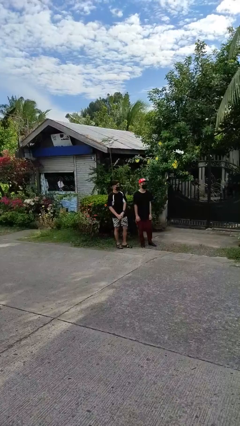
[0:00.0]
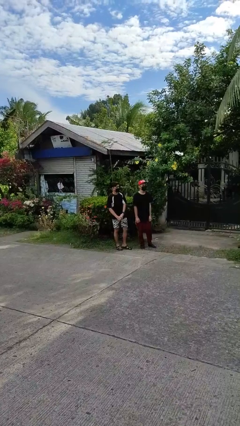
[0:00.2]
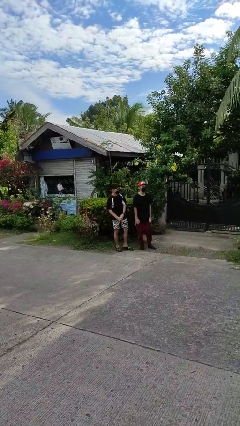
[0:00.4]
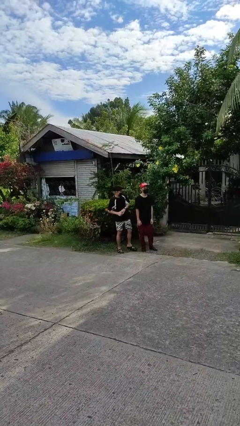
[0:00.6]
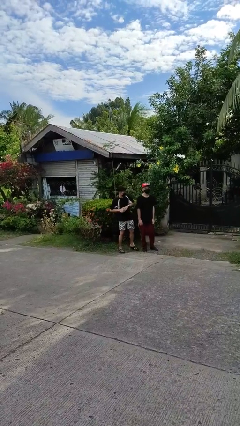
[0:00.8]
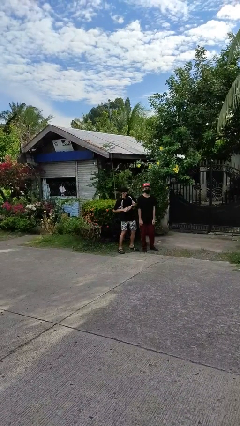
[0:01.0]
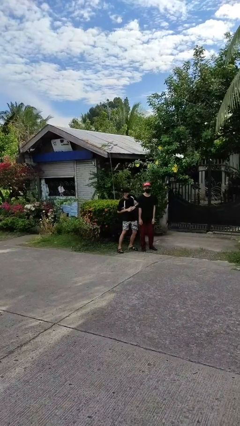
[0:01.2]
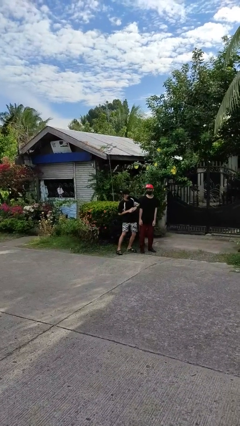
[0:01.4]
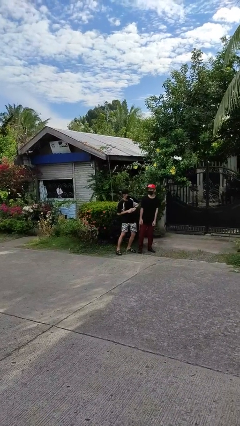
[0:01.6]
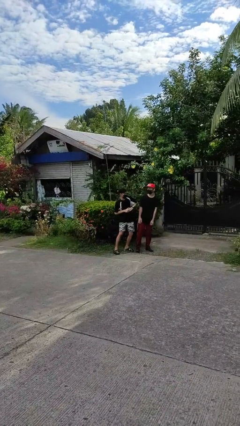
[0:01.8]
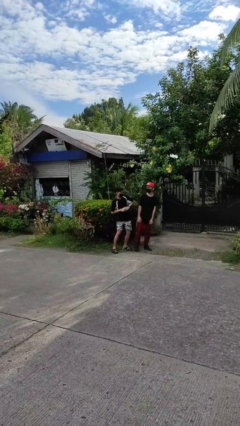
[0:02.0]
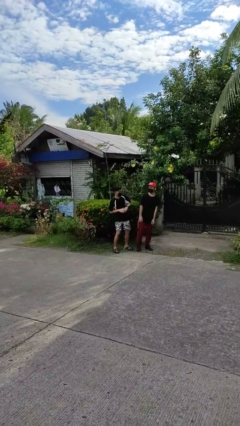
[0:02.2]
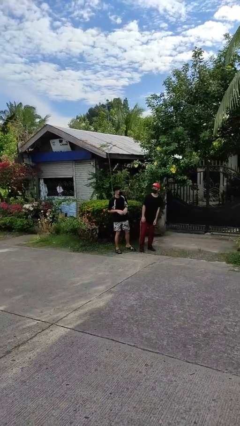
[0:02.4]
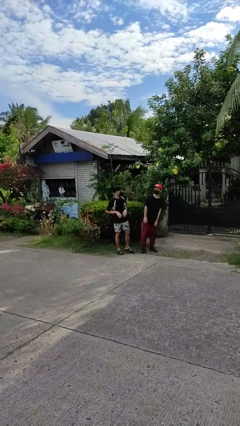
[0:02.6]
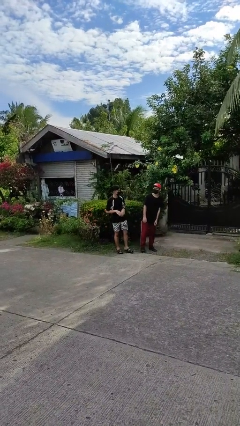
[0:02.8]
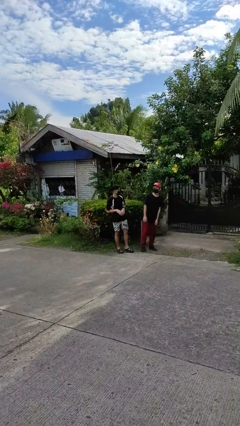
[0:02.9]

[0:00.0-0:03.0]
person nudges person with elbow

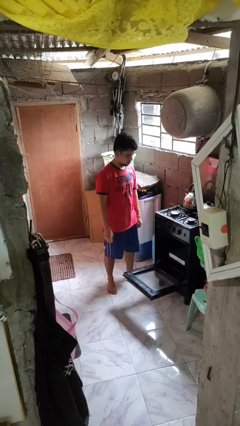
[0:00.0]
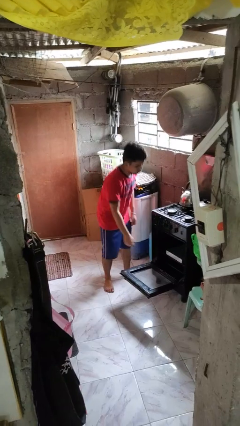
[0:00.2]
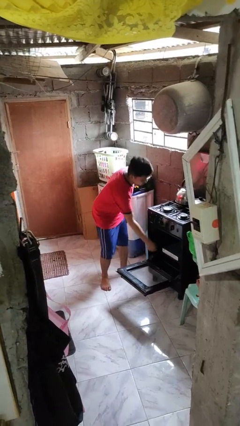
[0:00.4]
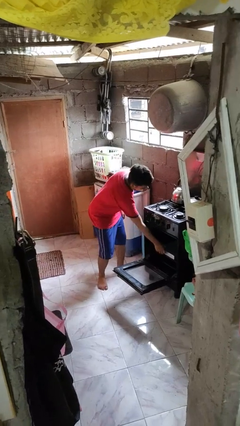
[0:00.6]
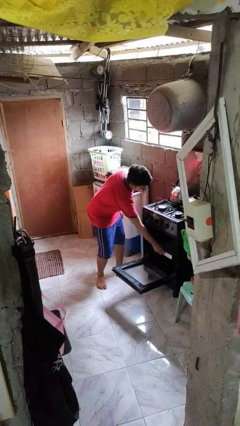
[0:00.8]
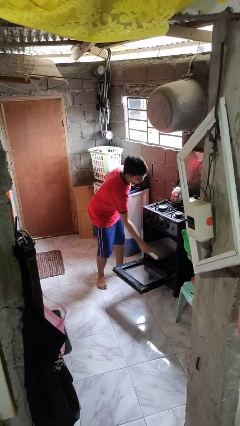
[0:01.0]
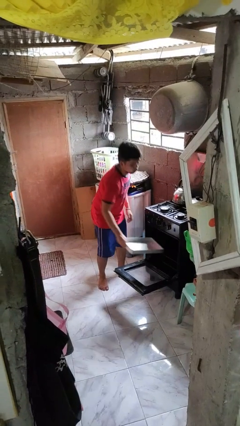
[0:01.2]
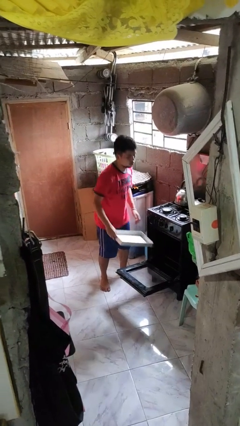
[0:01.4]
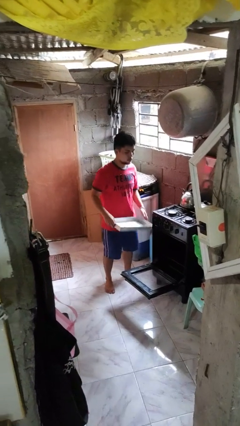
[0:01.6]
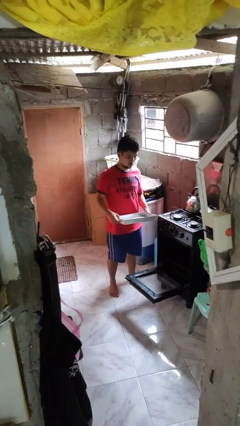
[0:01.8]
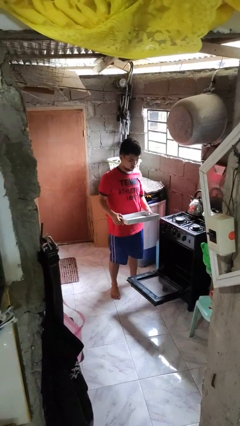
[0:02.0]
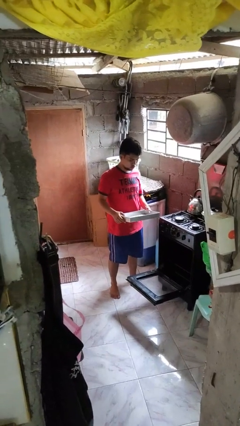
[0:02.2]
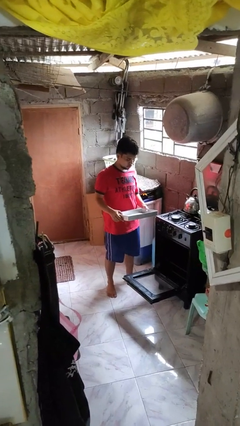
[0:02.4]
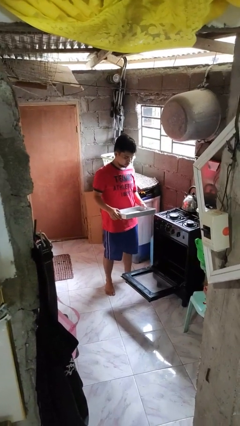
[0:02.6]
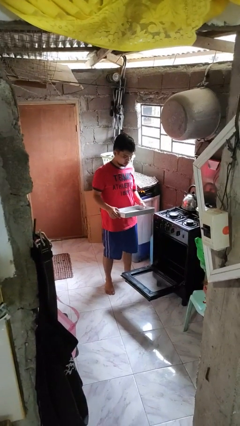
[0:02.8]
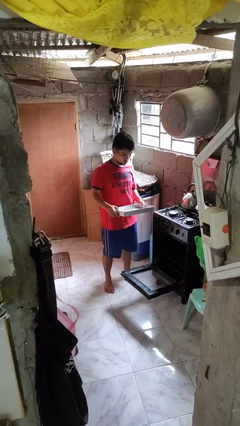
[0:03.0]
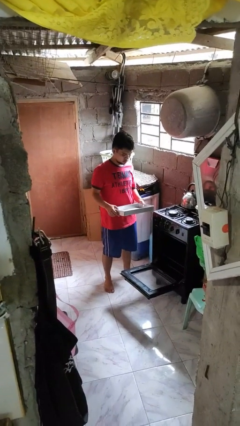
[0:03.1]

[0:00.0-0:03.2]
person takes object from oven

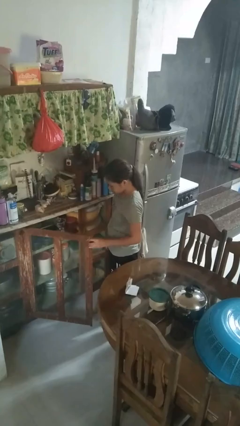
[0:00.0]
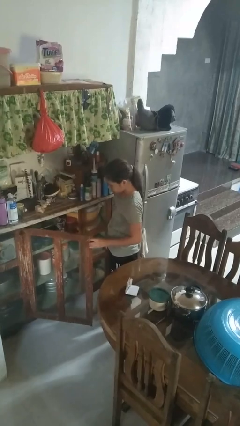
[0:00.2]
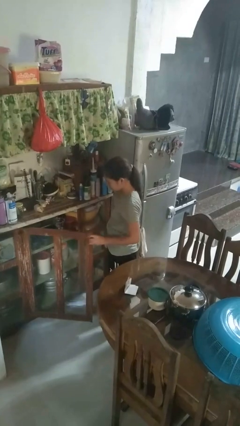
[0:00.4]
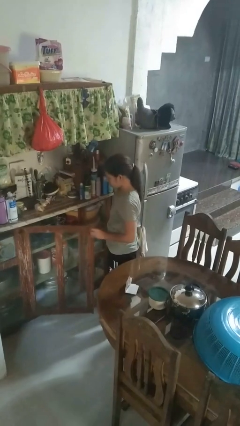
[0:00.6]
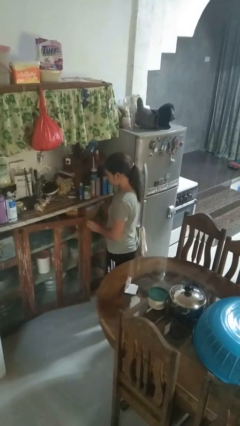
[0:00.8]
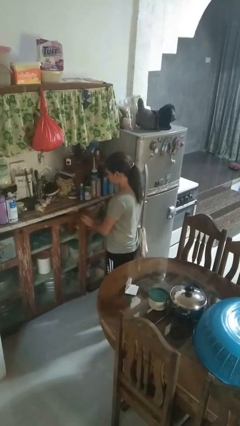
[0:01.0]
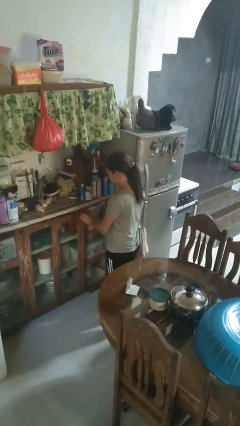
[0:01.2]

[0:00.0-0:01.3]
person closes cabinet

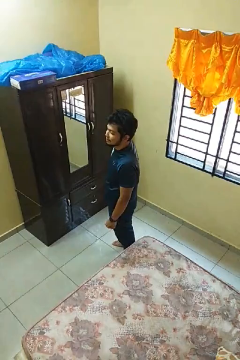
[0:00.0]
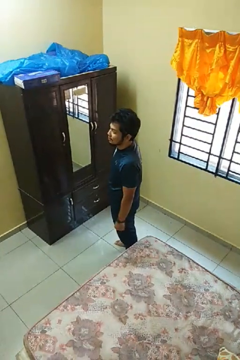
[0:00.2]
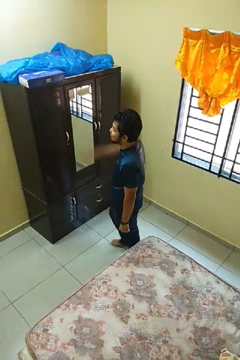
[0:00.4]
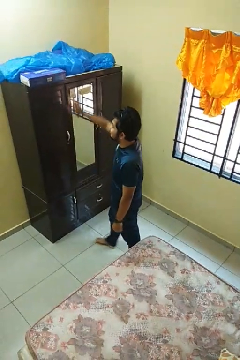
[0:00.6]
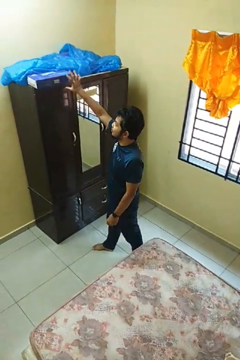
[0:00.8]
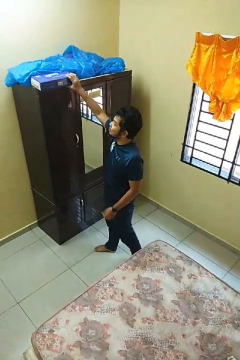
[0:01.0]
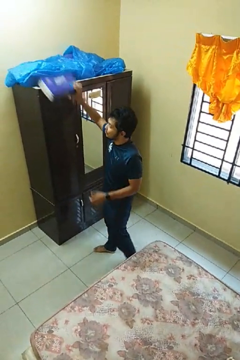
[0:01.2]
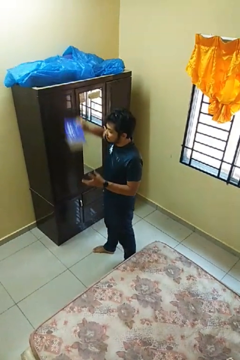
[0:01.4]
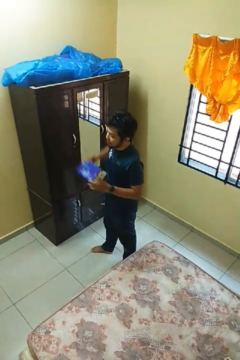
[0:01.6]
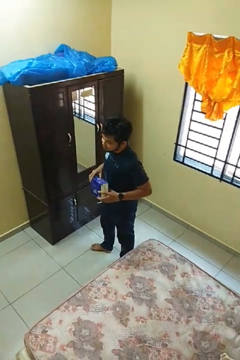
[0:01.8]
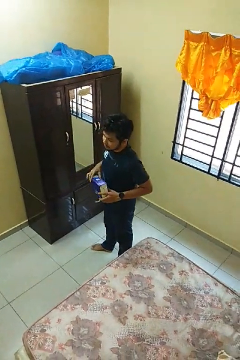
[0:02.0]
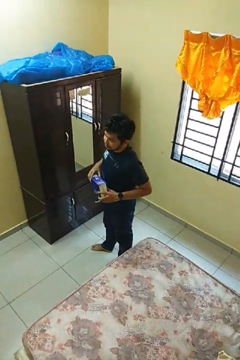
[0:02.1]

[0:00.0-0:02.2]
person picks up object from countertop

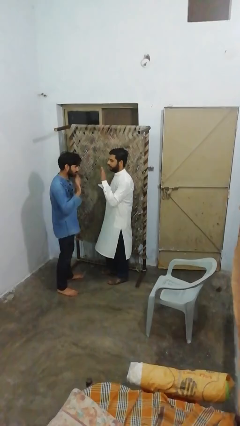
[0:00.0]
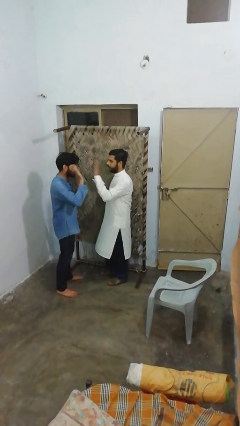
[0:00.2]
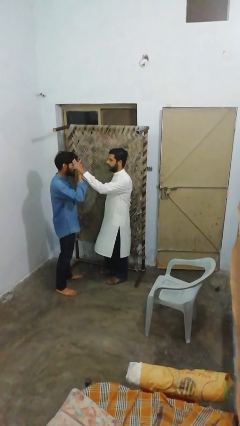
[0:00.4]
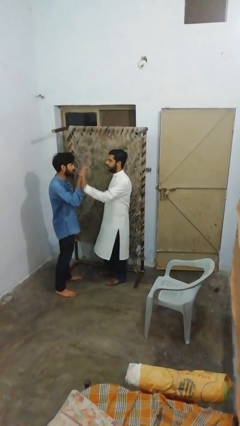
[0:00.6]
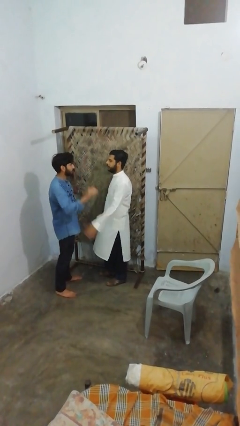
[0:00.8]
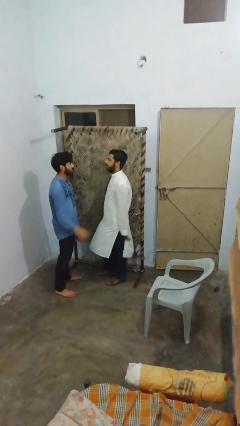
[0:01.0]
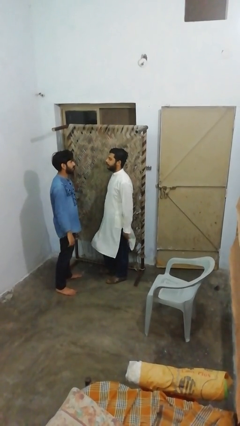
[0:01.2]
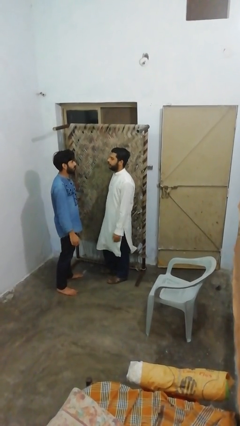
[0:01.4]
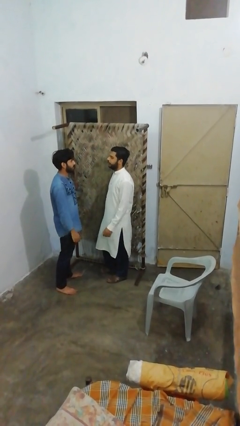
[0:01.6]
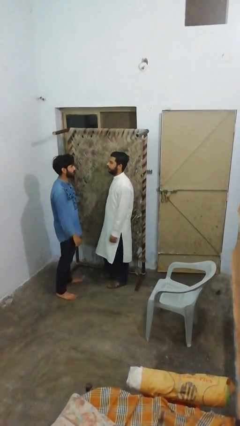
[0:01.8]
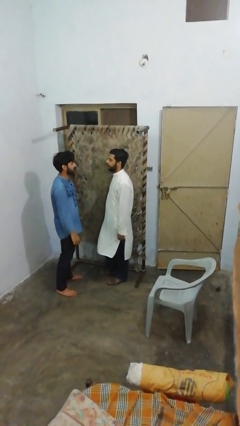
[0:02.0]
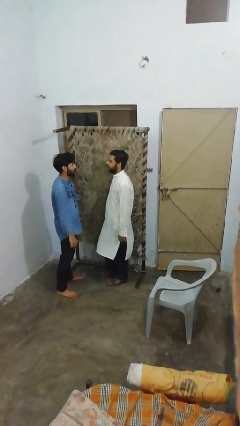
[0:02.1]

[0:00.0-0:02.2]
person highfives hand

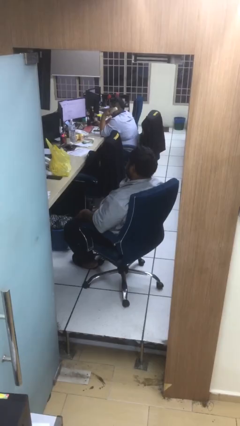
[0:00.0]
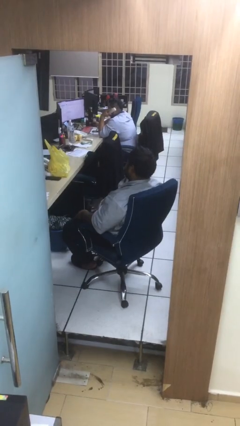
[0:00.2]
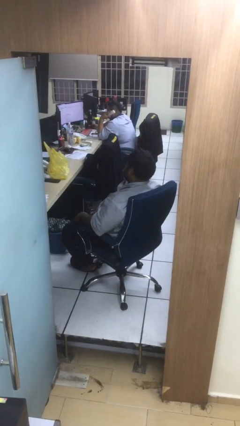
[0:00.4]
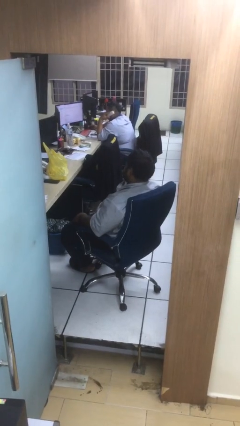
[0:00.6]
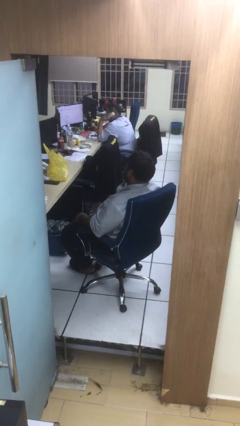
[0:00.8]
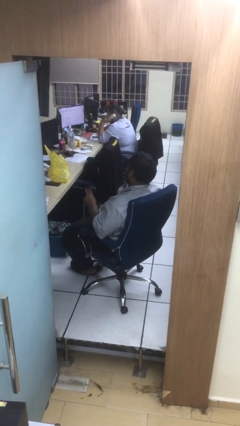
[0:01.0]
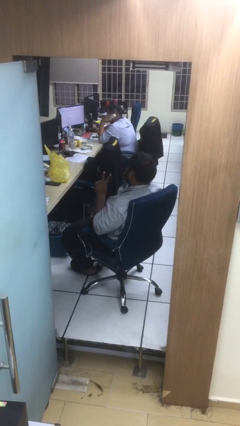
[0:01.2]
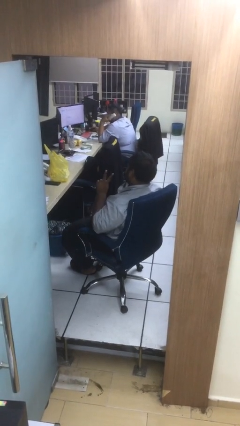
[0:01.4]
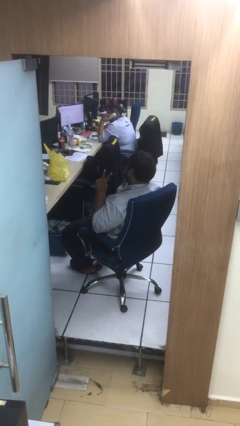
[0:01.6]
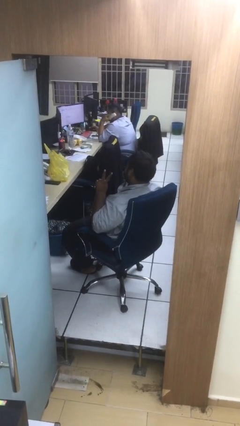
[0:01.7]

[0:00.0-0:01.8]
person gestures peace

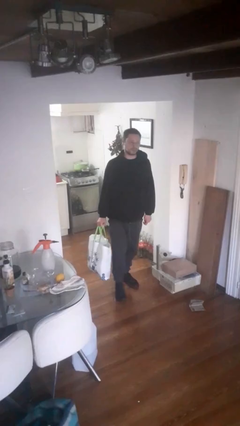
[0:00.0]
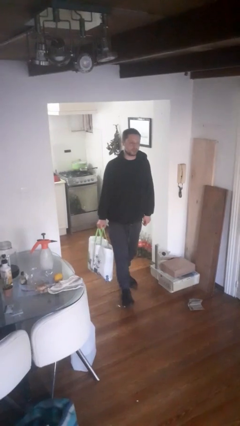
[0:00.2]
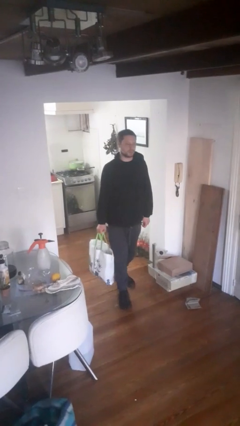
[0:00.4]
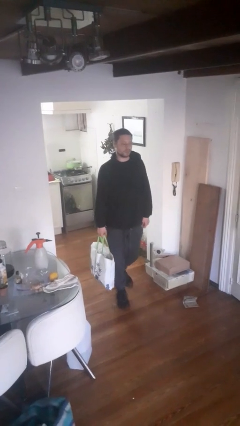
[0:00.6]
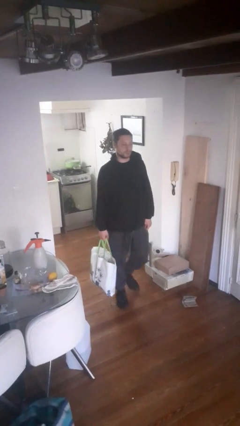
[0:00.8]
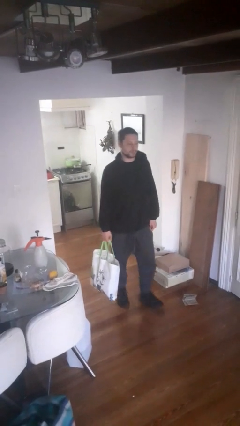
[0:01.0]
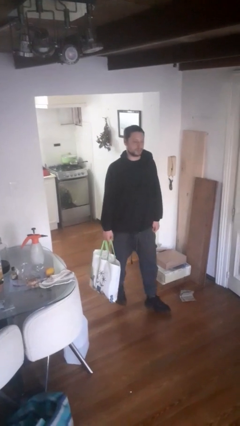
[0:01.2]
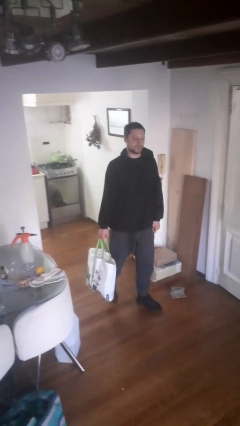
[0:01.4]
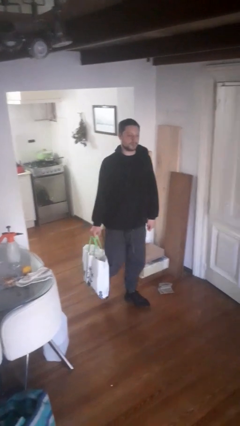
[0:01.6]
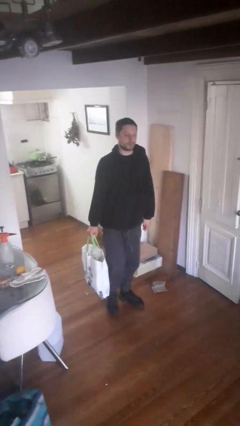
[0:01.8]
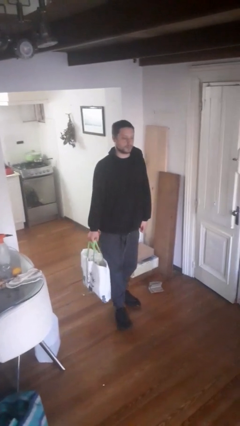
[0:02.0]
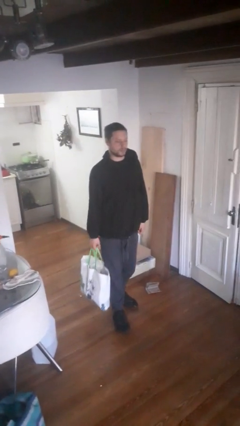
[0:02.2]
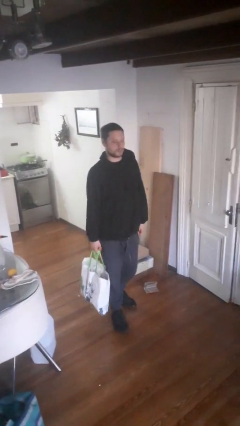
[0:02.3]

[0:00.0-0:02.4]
person carries groceries

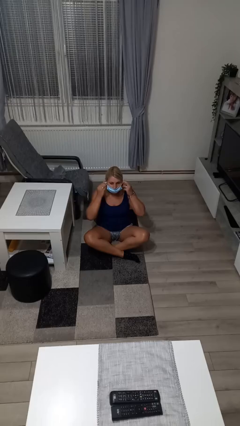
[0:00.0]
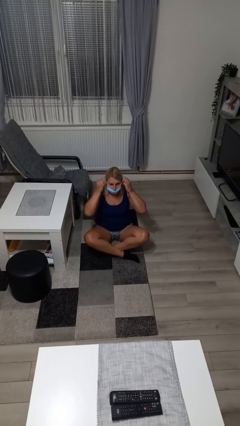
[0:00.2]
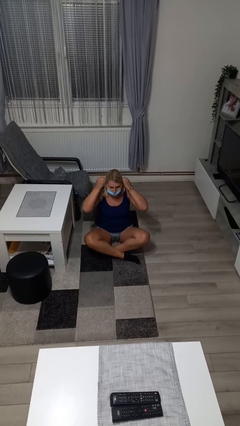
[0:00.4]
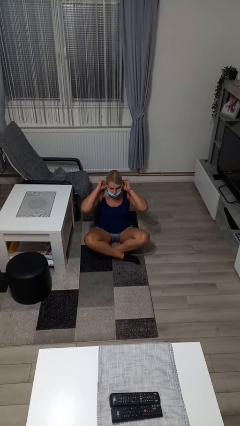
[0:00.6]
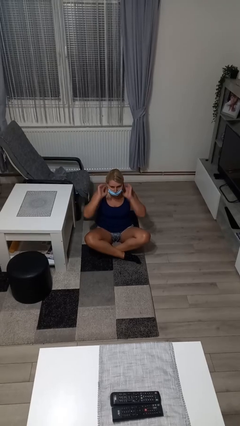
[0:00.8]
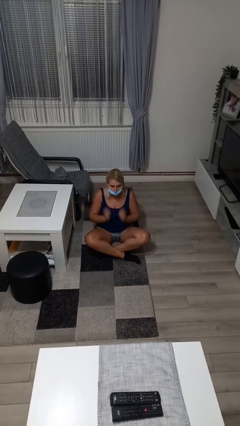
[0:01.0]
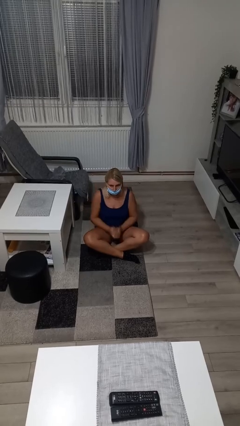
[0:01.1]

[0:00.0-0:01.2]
person puts on facemask
